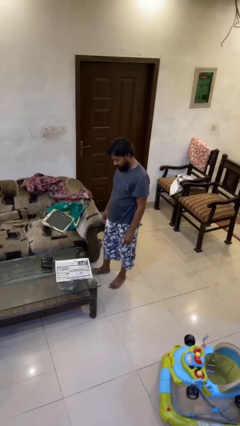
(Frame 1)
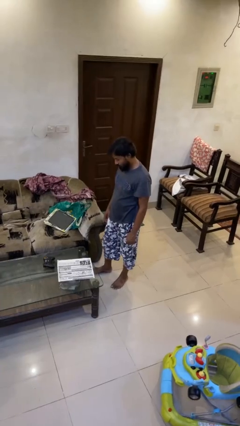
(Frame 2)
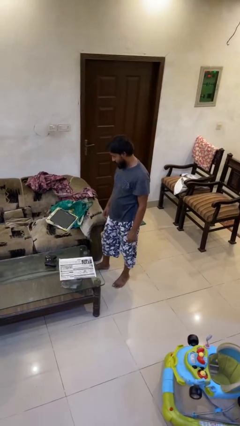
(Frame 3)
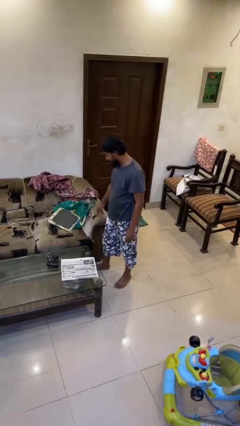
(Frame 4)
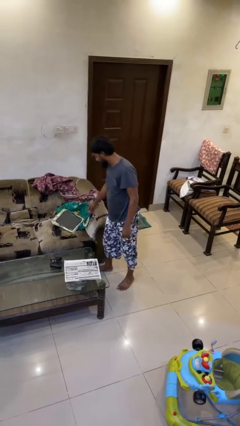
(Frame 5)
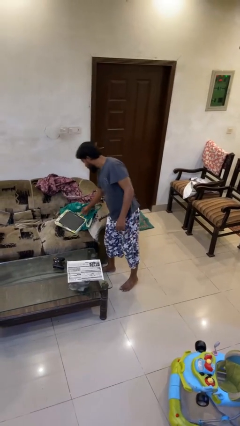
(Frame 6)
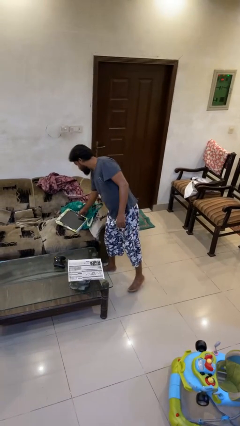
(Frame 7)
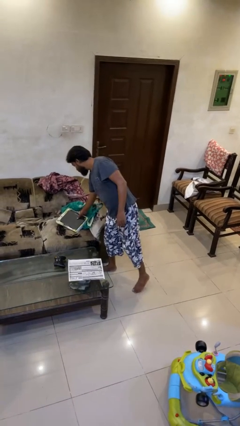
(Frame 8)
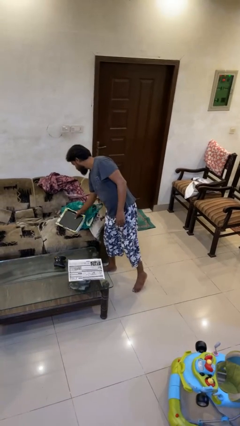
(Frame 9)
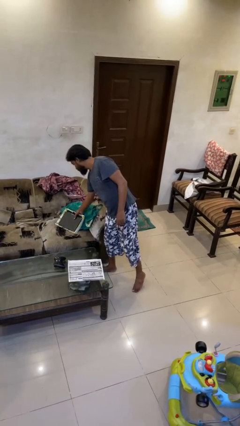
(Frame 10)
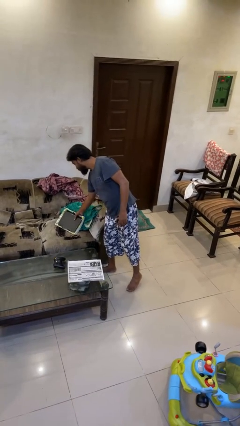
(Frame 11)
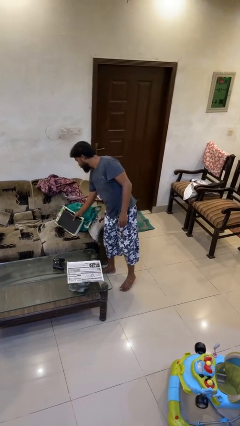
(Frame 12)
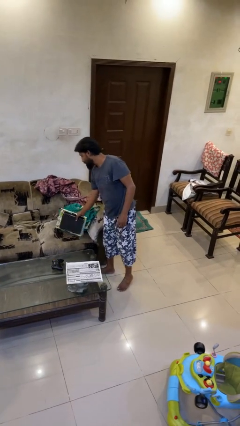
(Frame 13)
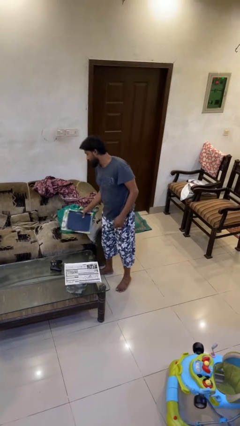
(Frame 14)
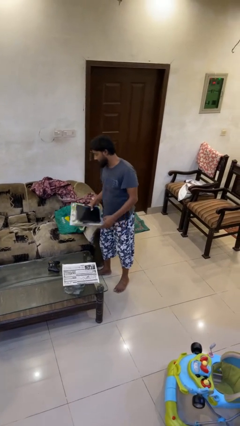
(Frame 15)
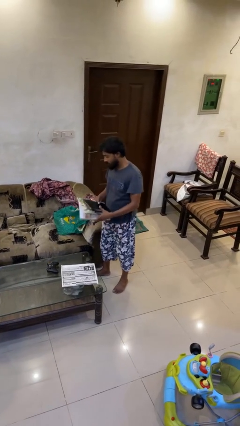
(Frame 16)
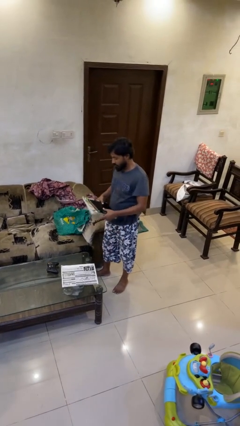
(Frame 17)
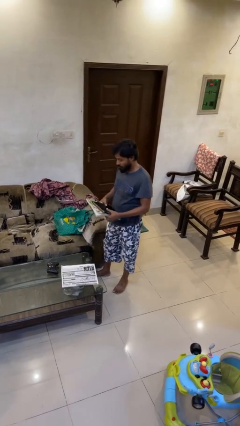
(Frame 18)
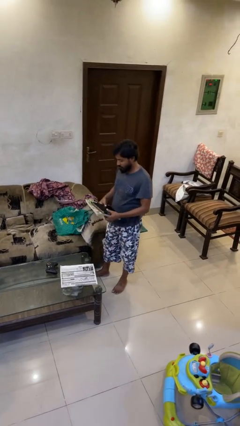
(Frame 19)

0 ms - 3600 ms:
person picks up object from couch

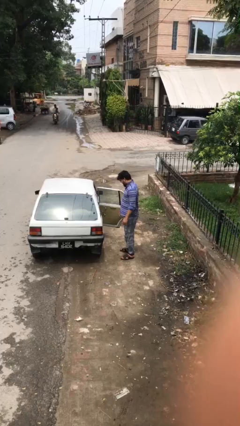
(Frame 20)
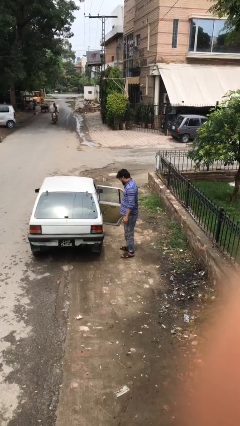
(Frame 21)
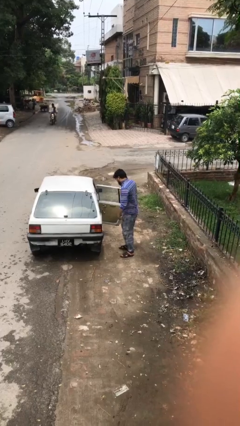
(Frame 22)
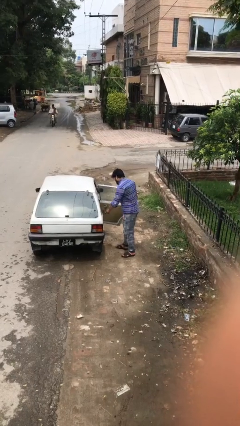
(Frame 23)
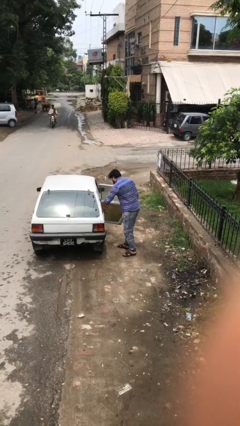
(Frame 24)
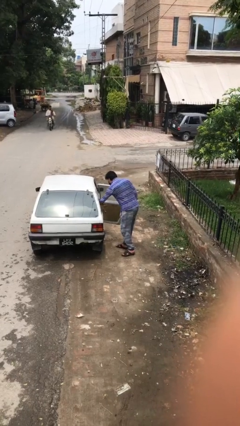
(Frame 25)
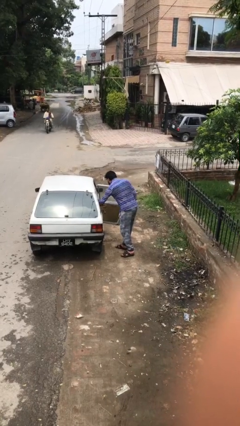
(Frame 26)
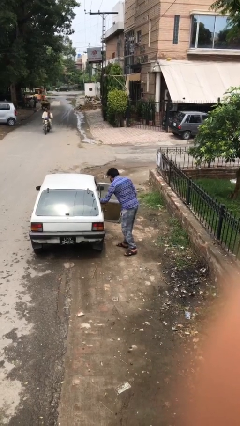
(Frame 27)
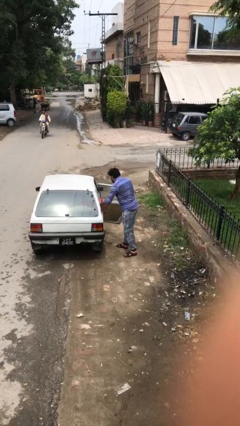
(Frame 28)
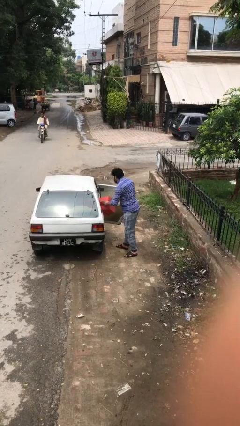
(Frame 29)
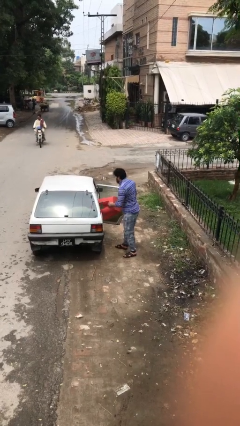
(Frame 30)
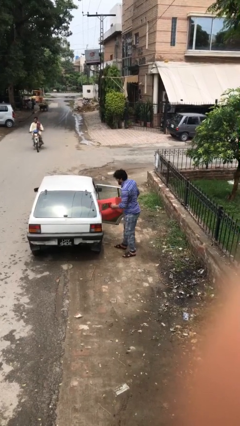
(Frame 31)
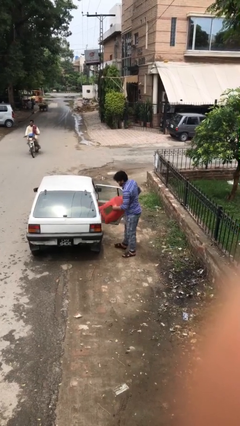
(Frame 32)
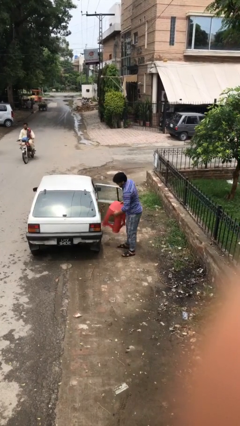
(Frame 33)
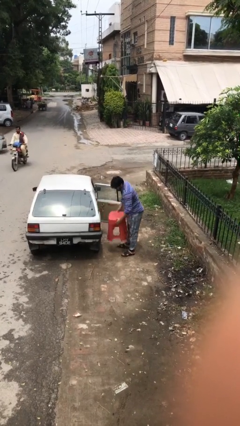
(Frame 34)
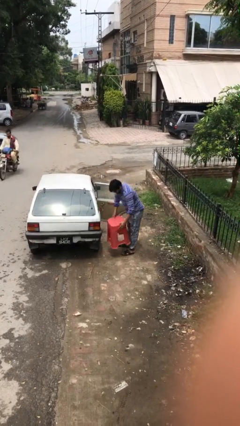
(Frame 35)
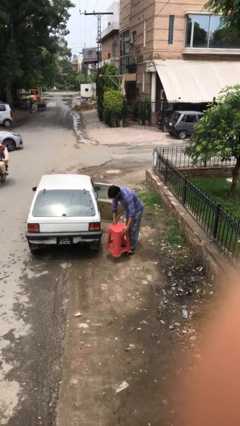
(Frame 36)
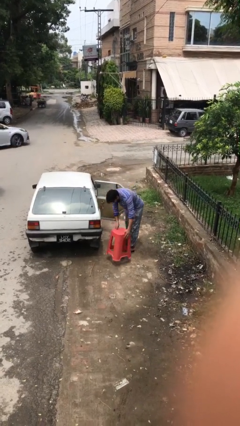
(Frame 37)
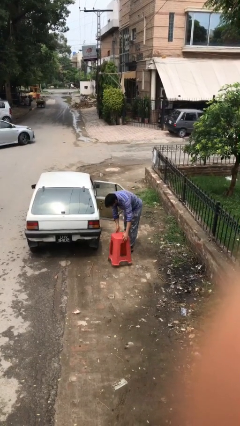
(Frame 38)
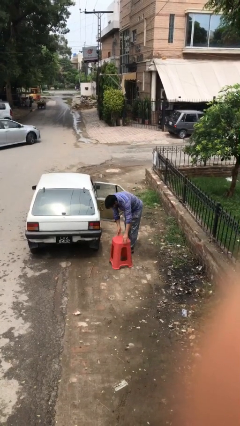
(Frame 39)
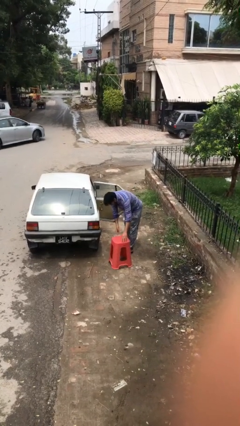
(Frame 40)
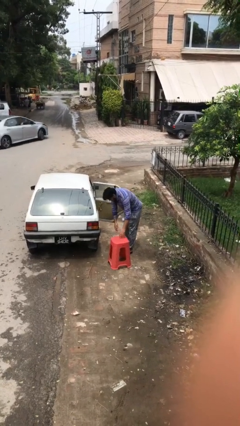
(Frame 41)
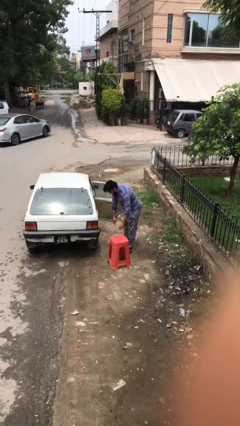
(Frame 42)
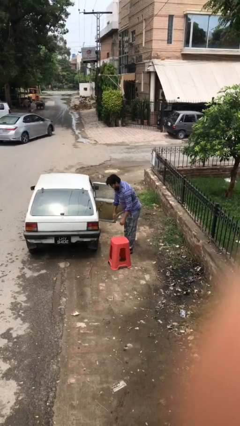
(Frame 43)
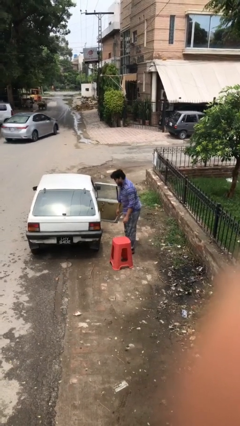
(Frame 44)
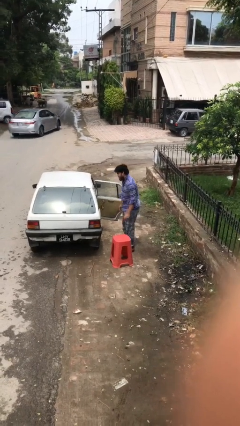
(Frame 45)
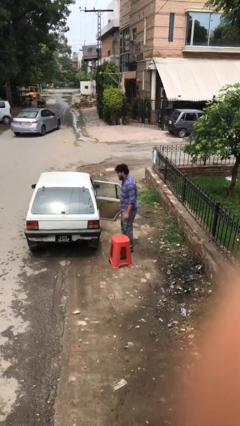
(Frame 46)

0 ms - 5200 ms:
person unloads car

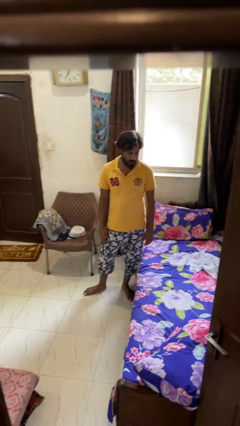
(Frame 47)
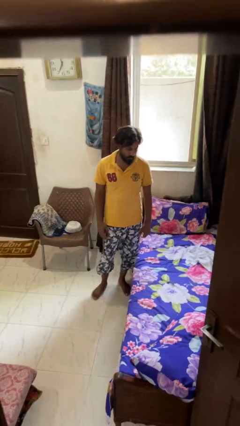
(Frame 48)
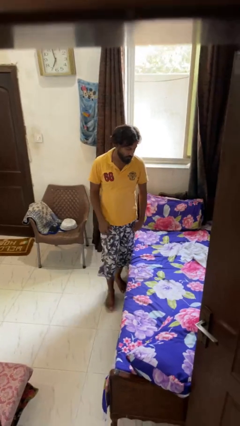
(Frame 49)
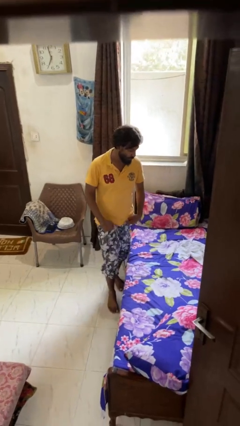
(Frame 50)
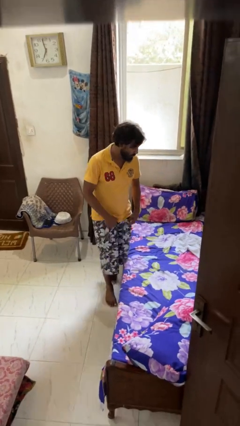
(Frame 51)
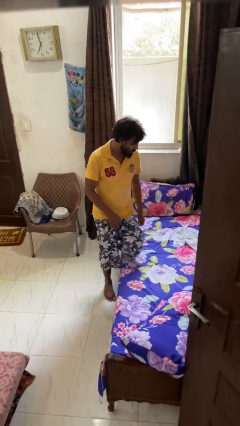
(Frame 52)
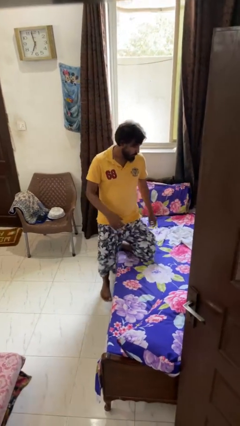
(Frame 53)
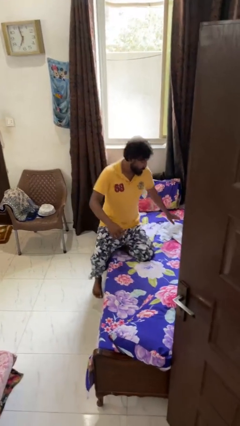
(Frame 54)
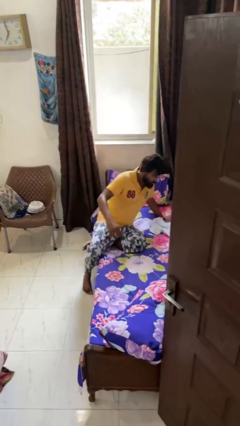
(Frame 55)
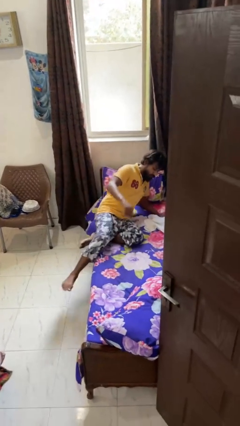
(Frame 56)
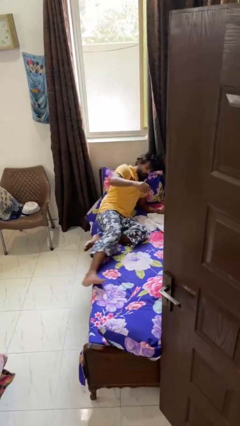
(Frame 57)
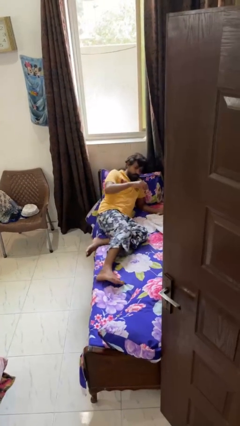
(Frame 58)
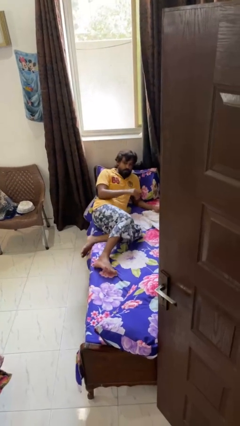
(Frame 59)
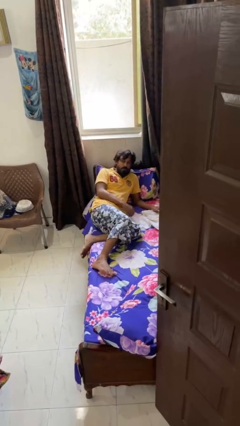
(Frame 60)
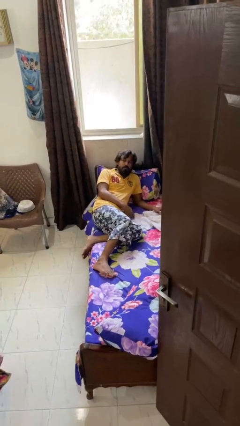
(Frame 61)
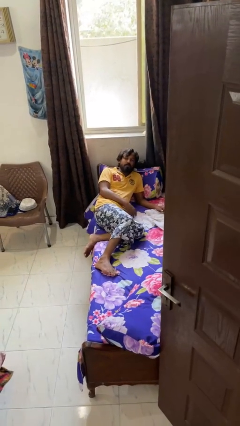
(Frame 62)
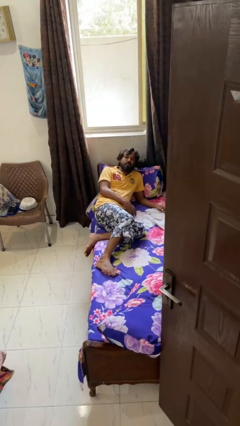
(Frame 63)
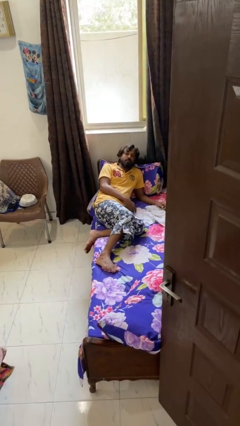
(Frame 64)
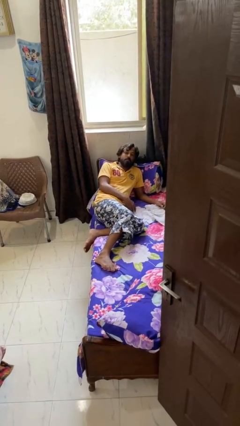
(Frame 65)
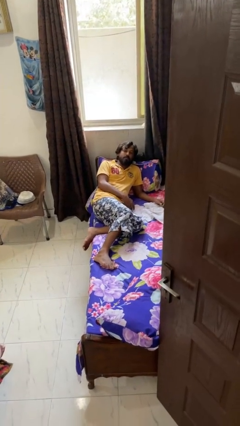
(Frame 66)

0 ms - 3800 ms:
person lies down on bed

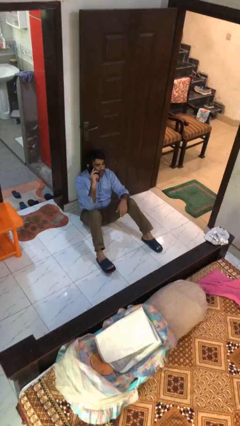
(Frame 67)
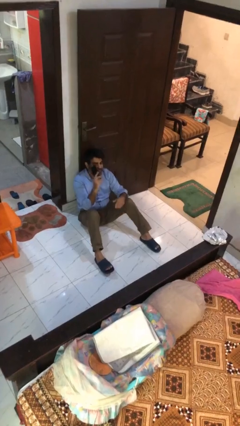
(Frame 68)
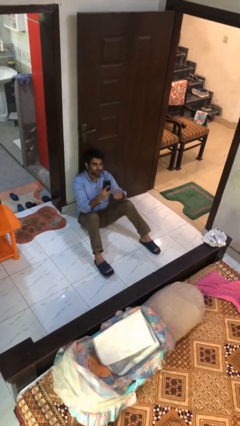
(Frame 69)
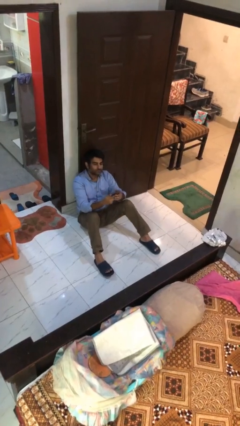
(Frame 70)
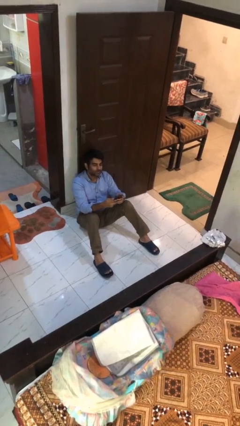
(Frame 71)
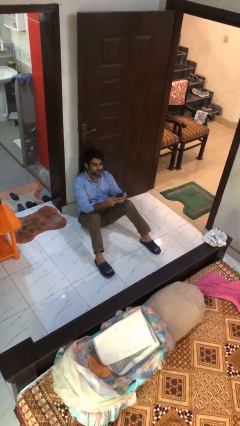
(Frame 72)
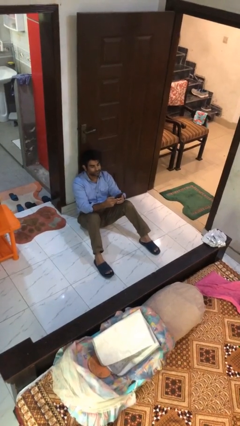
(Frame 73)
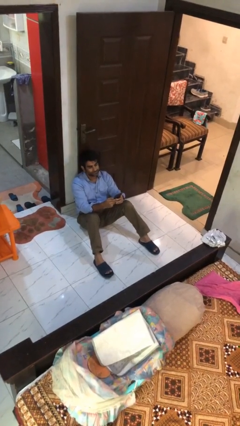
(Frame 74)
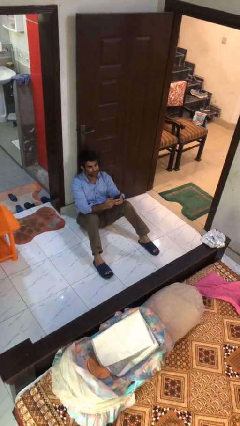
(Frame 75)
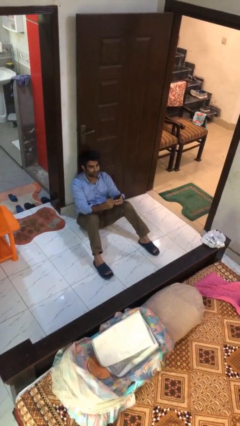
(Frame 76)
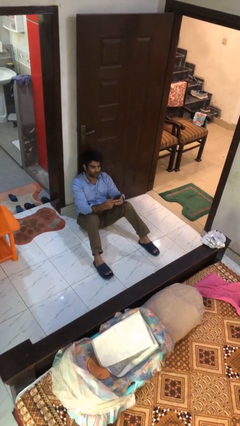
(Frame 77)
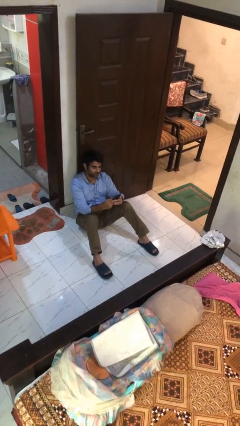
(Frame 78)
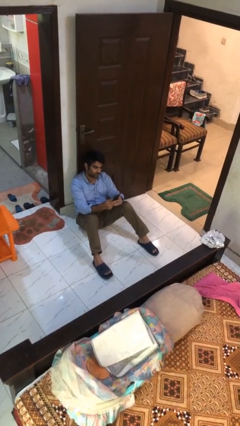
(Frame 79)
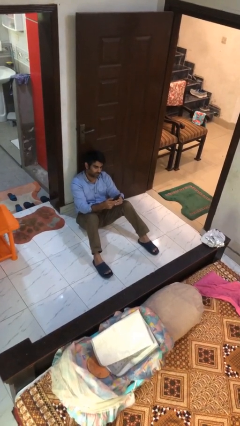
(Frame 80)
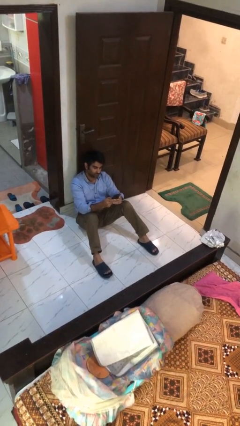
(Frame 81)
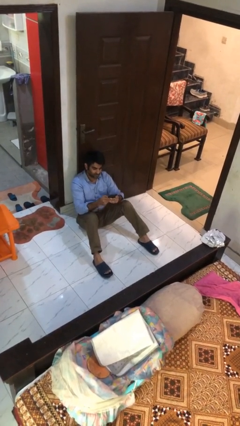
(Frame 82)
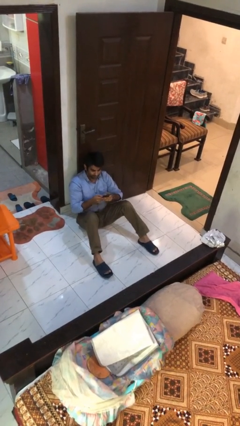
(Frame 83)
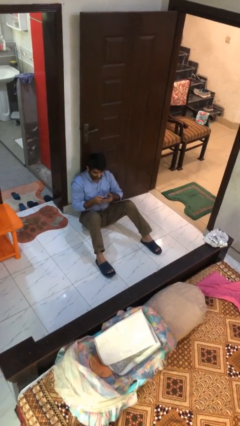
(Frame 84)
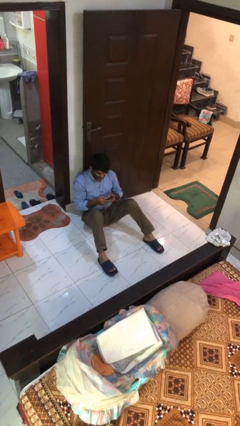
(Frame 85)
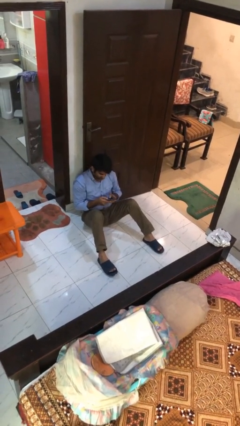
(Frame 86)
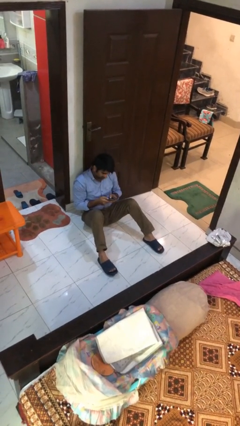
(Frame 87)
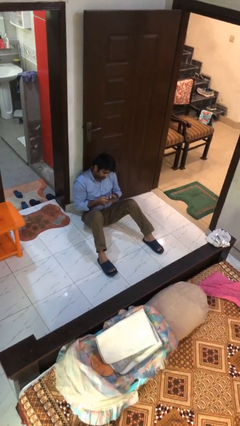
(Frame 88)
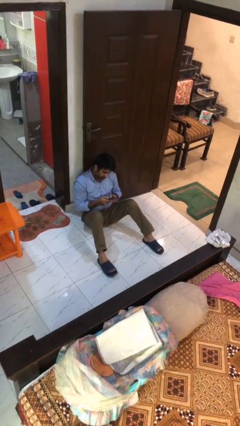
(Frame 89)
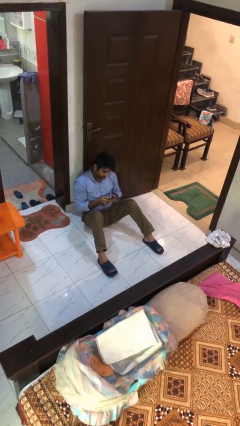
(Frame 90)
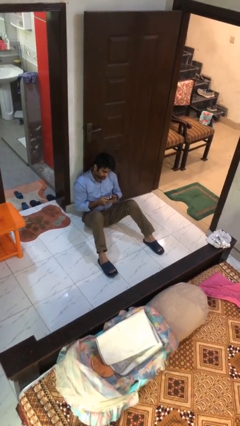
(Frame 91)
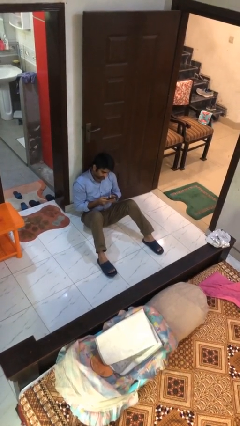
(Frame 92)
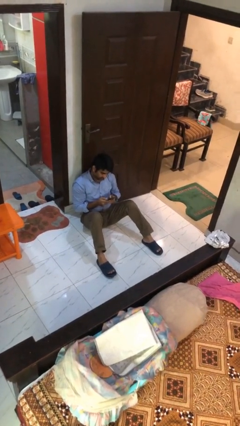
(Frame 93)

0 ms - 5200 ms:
person texts on phone
